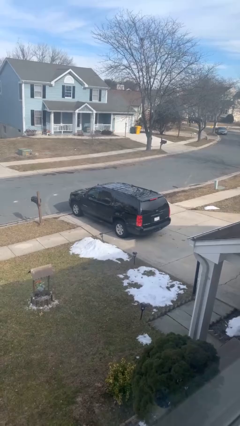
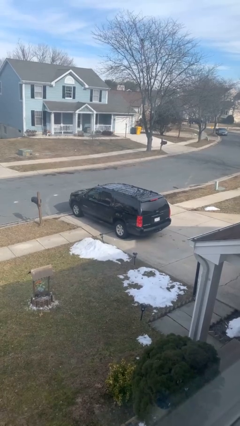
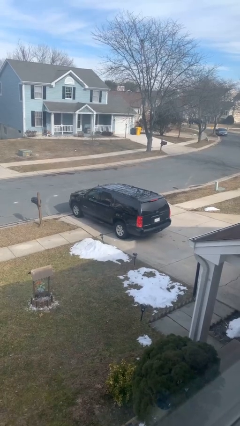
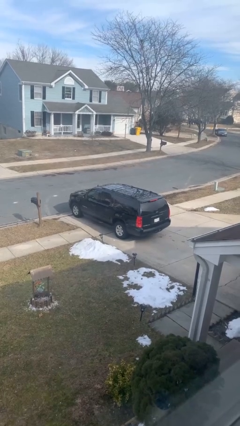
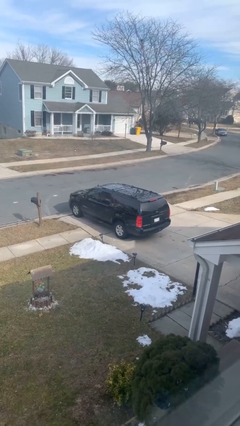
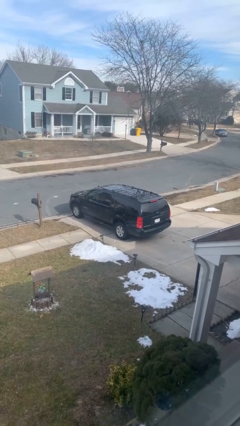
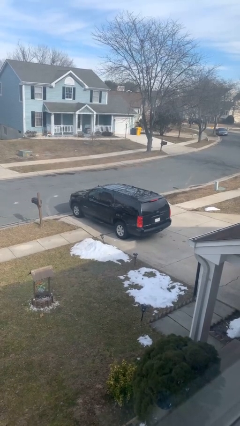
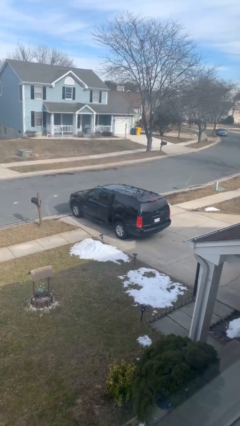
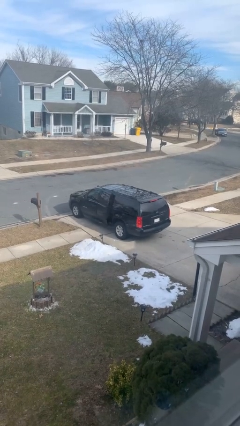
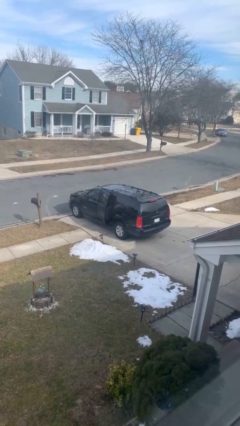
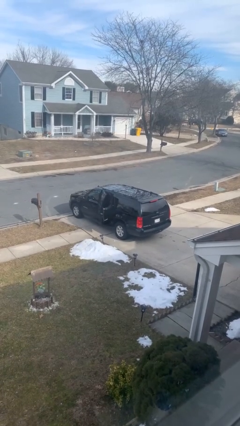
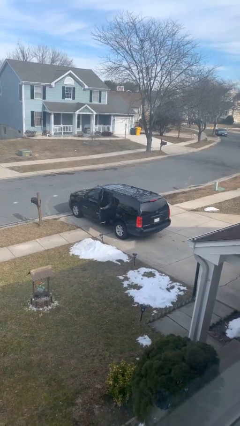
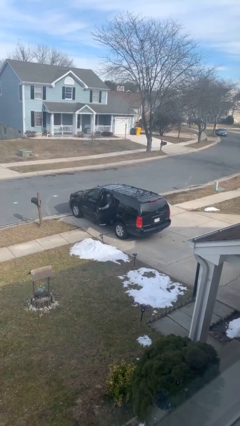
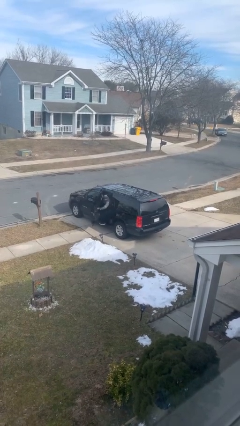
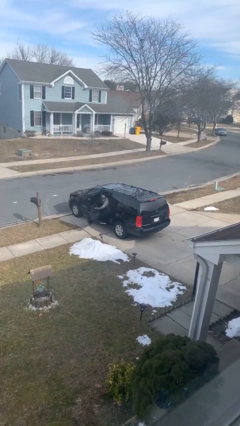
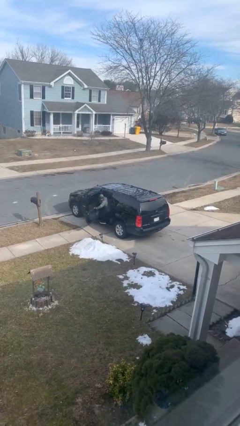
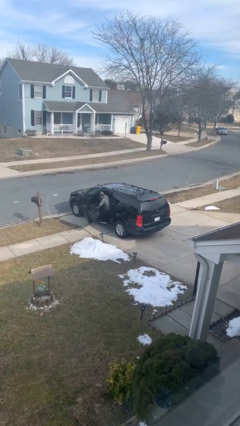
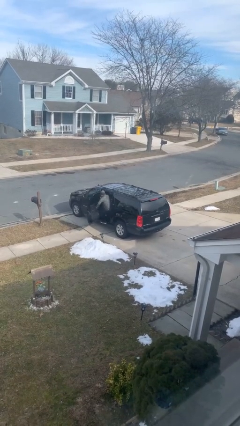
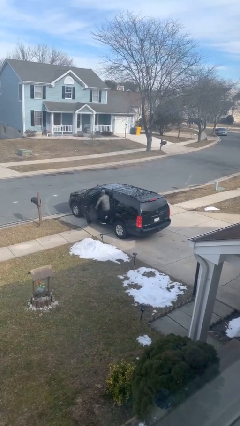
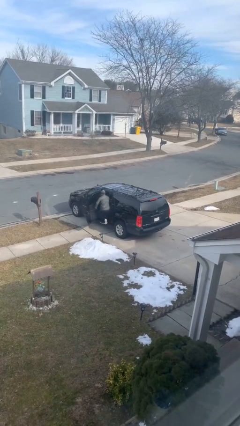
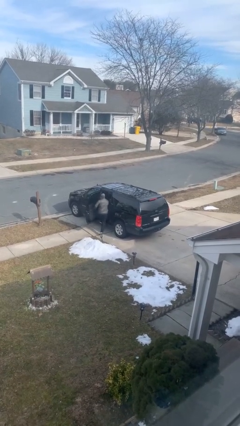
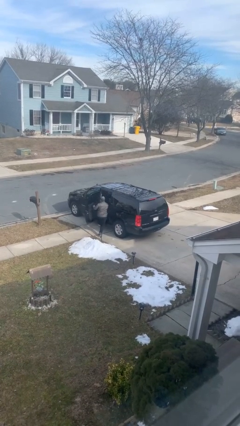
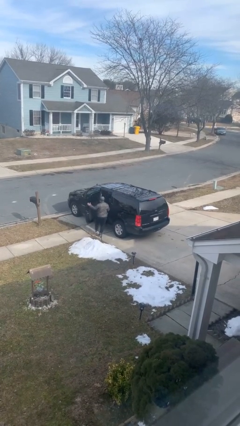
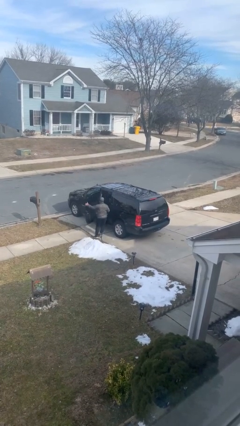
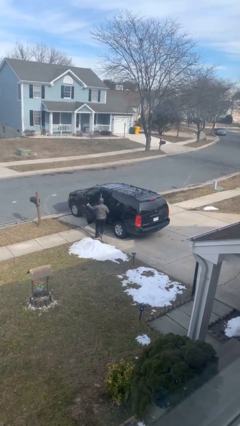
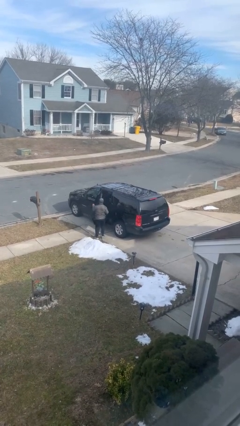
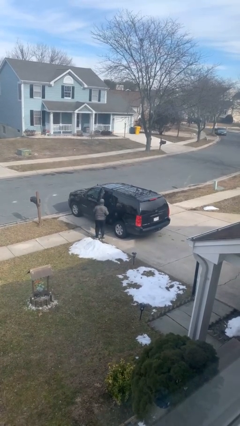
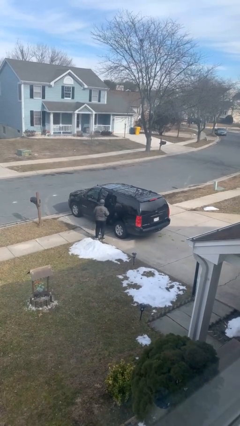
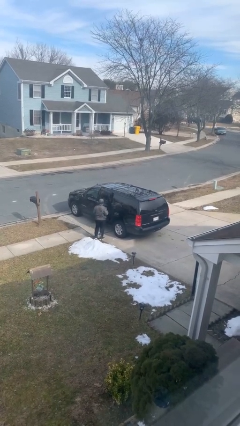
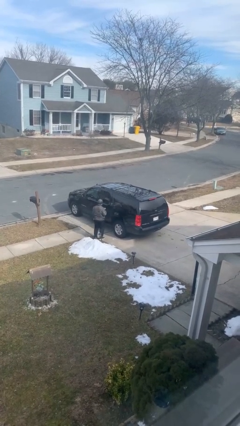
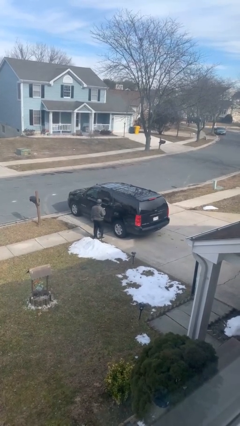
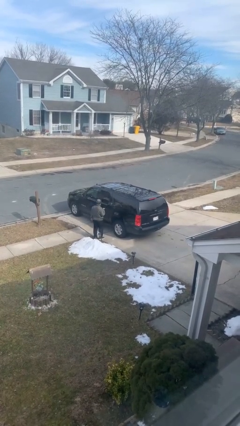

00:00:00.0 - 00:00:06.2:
car drops off person

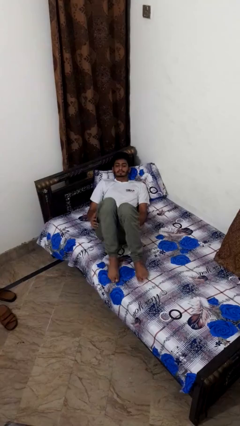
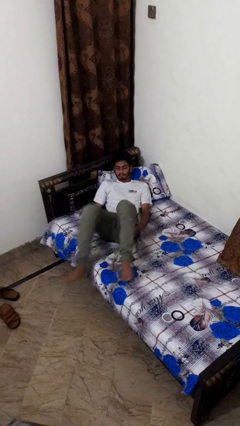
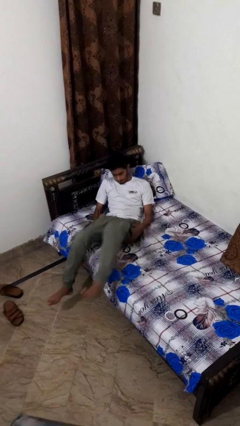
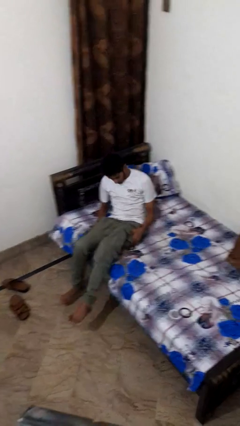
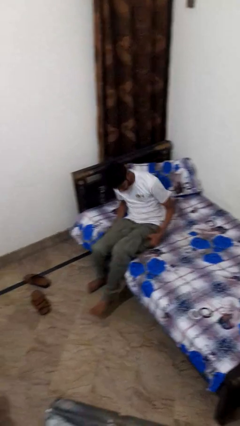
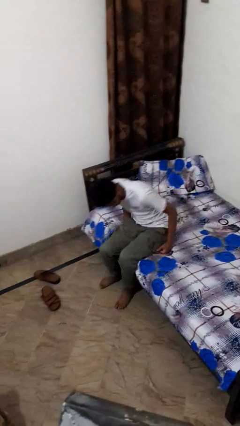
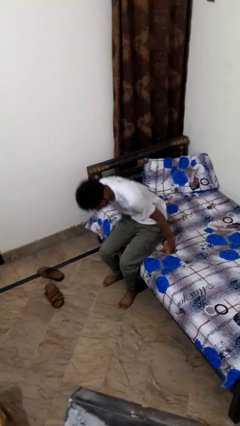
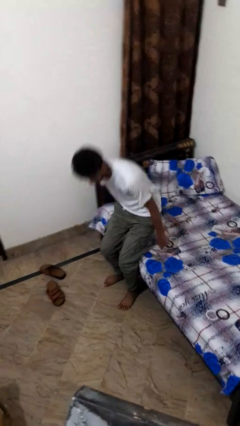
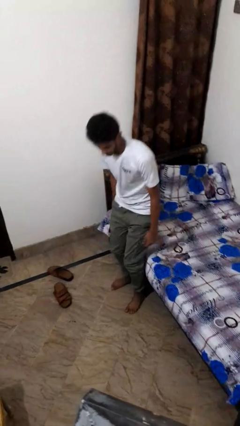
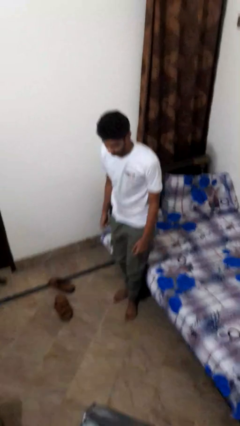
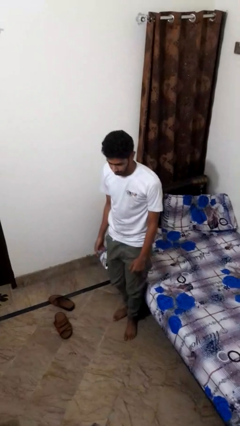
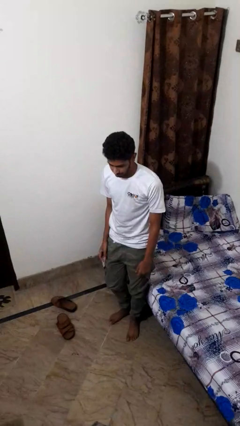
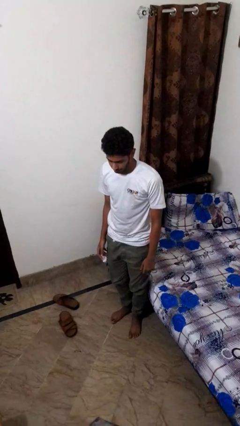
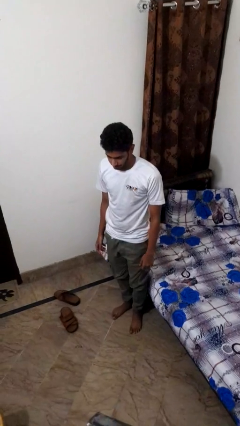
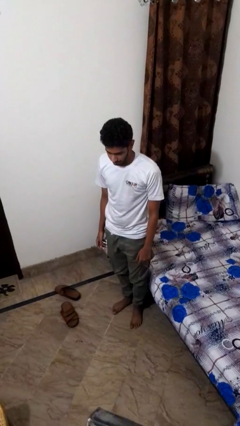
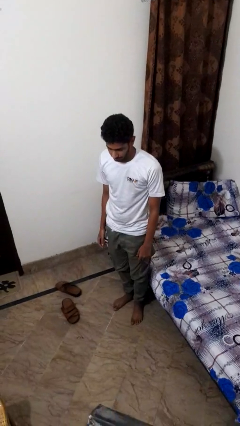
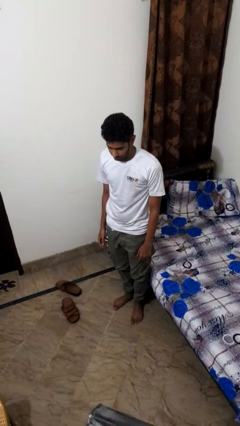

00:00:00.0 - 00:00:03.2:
person stands up

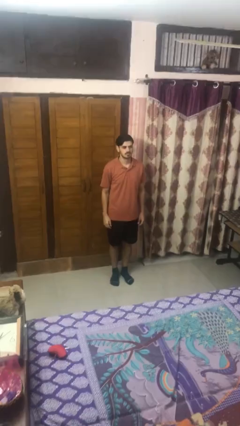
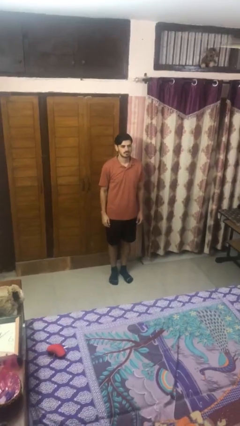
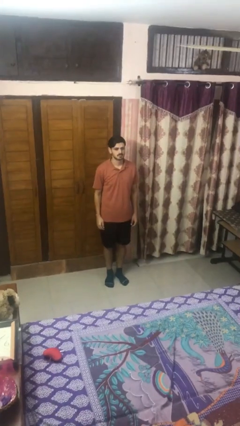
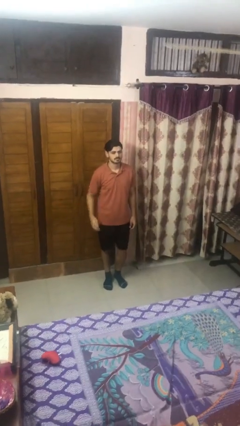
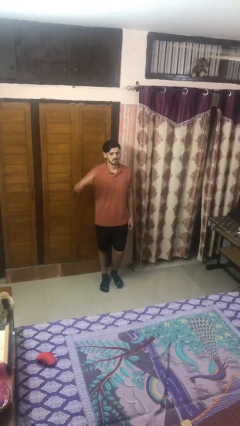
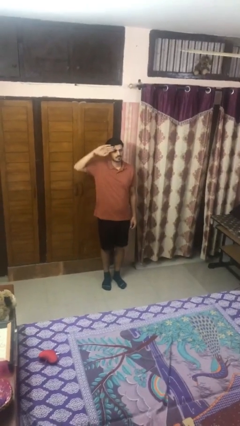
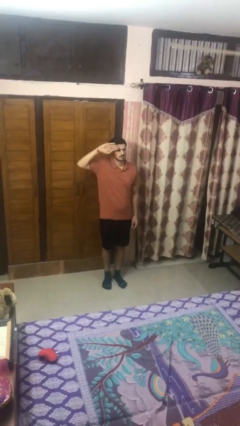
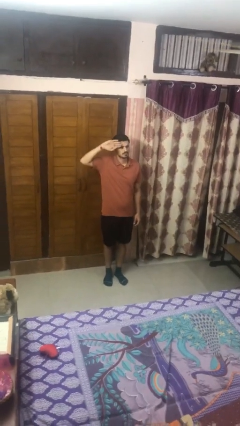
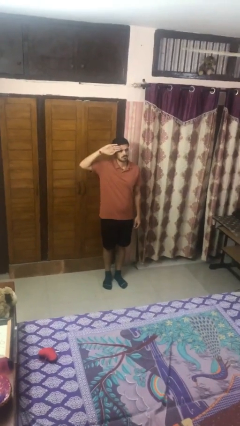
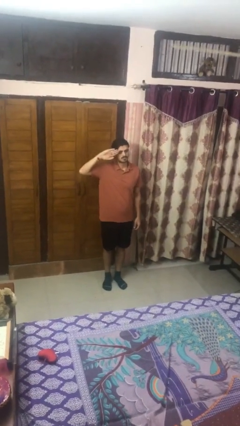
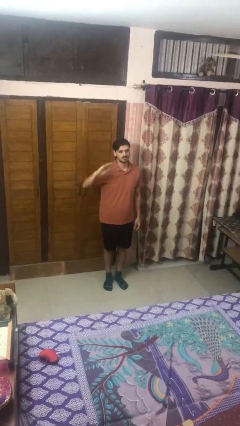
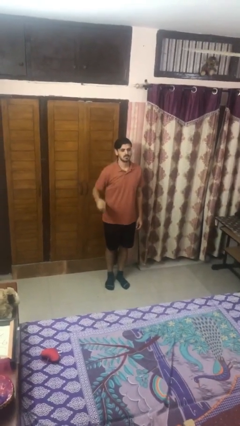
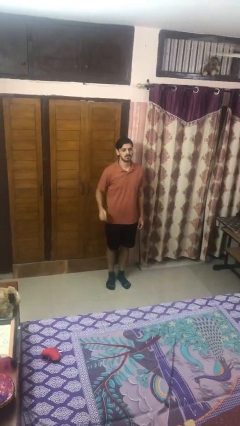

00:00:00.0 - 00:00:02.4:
person salutes

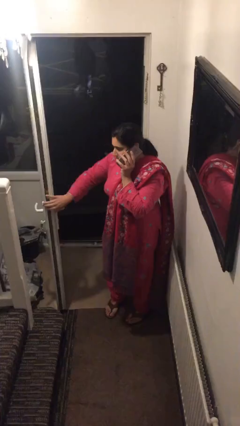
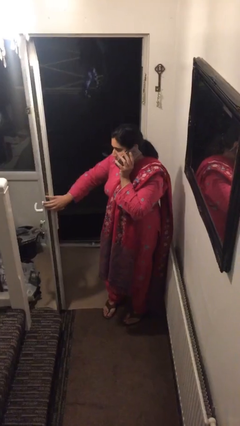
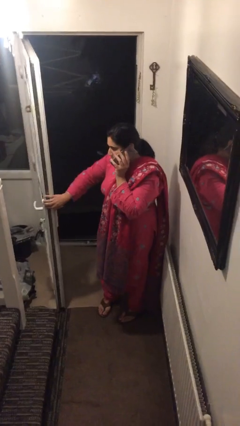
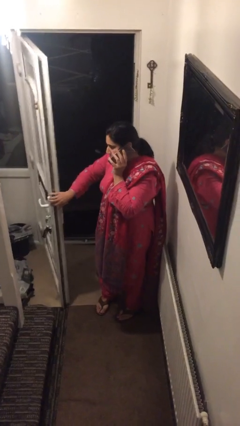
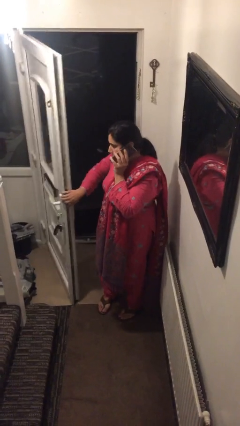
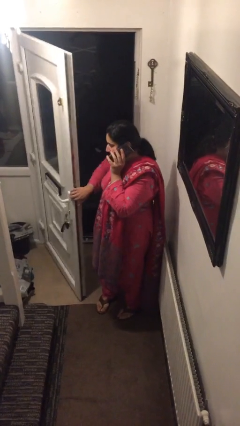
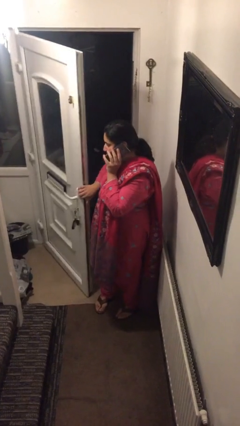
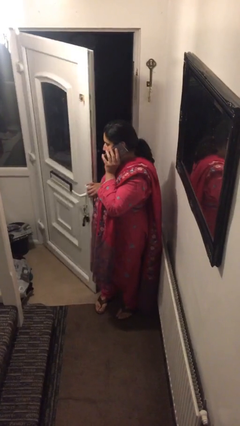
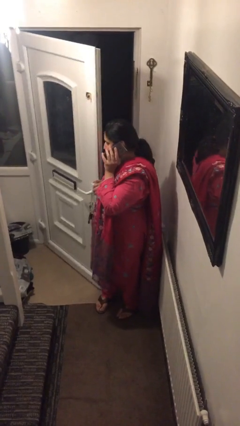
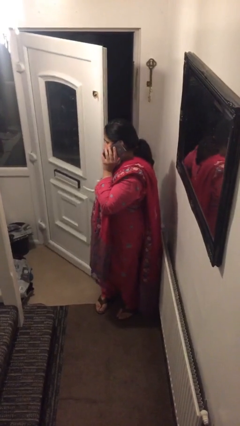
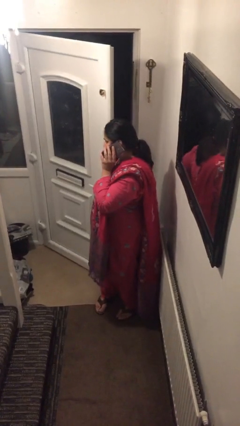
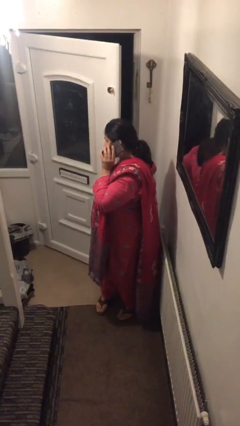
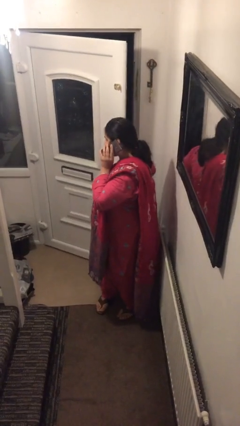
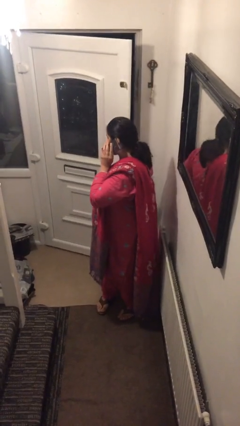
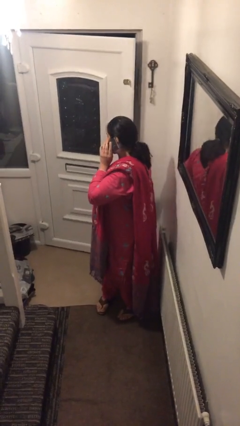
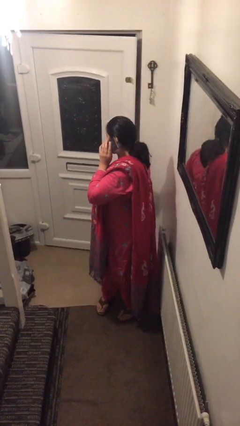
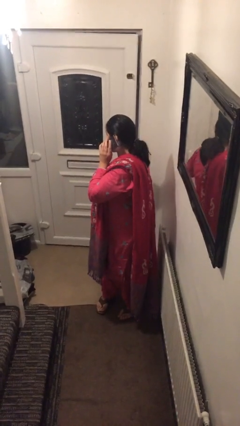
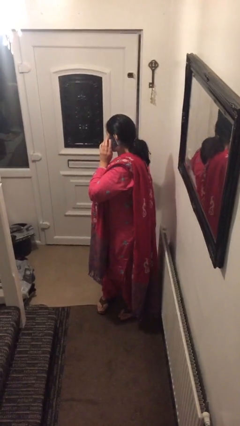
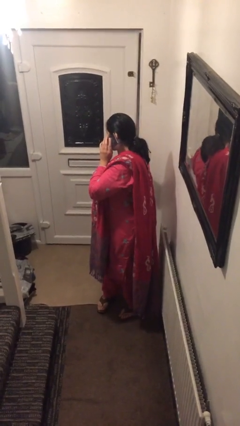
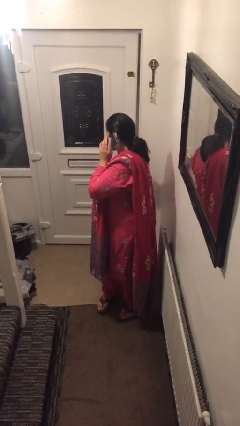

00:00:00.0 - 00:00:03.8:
person closes facility door

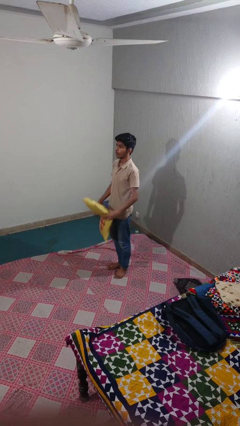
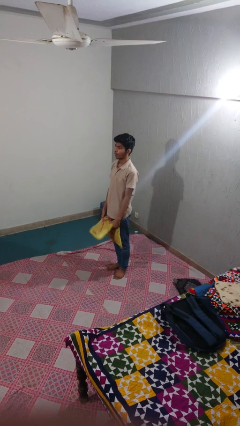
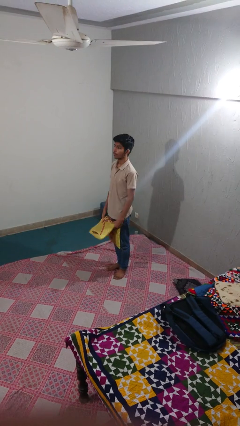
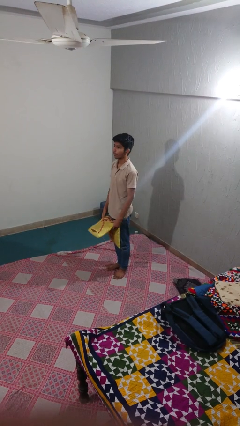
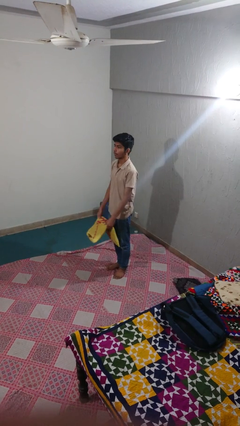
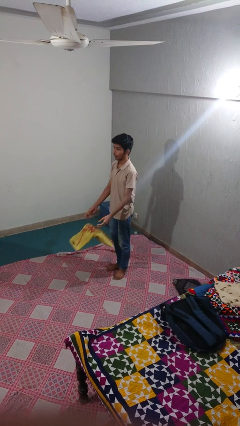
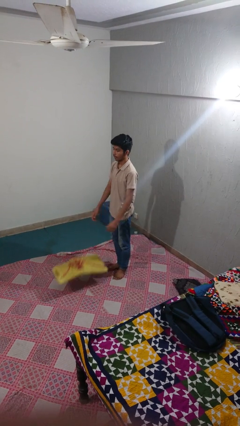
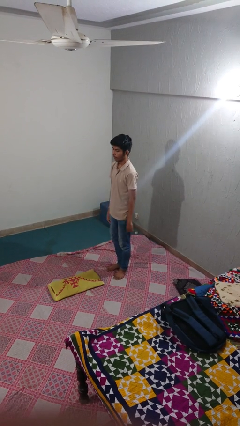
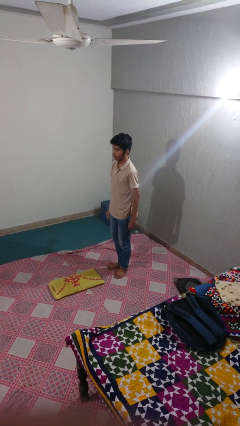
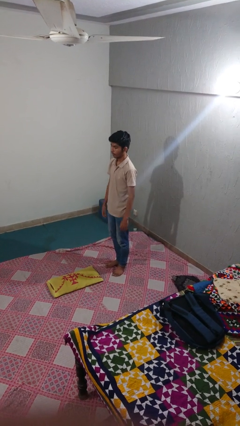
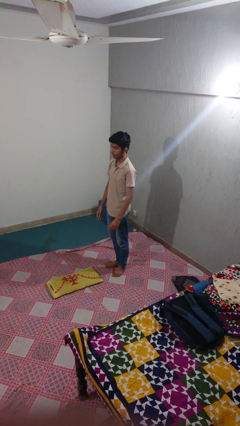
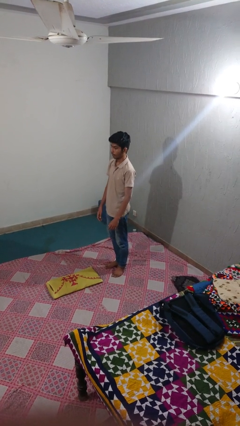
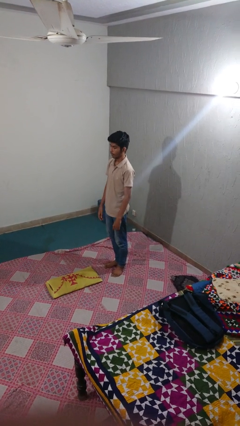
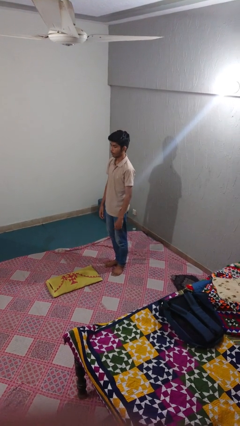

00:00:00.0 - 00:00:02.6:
person drops object
